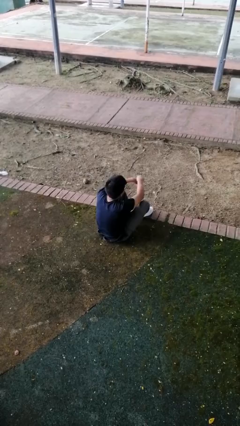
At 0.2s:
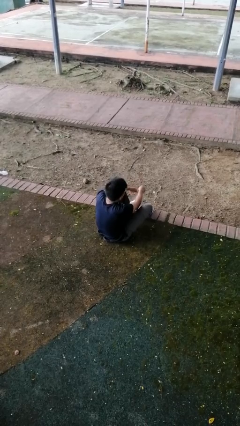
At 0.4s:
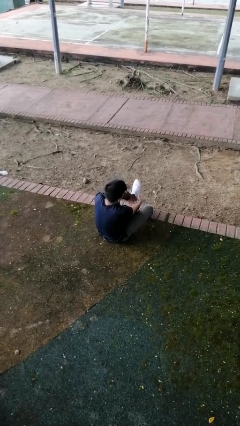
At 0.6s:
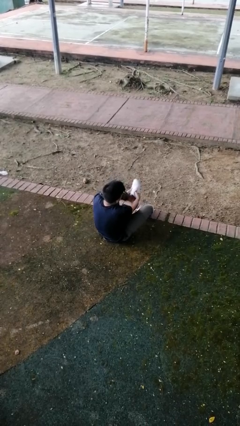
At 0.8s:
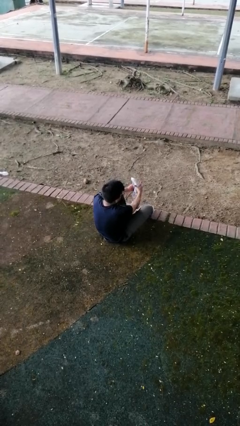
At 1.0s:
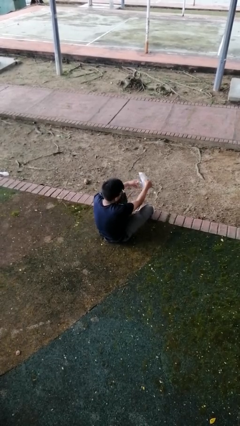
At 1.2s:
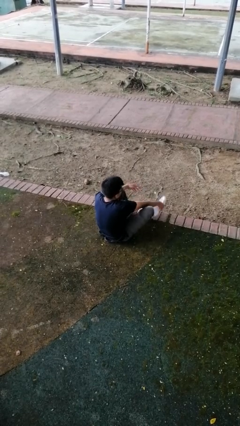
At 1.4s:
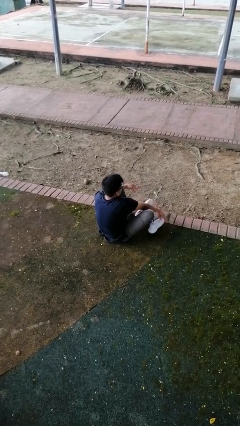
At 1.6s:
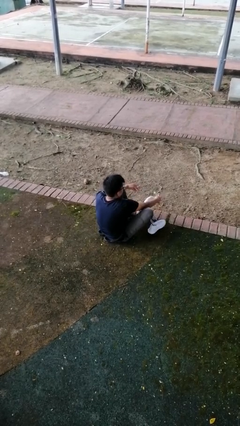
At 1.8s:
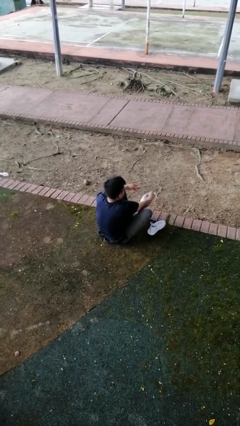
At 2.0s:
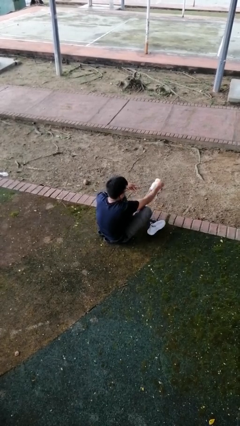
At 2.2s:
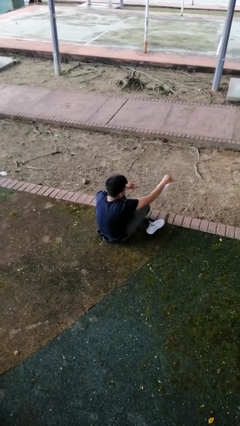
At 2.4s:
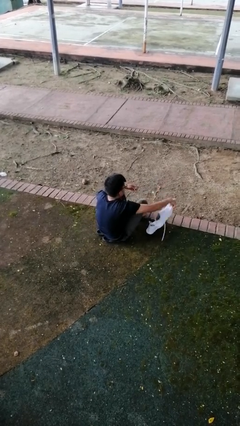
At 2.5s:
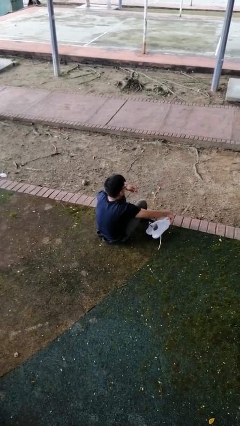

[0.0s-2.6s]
person takes off shoes

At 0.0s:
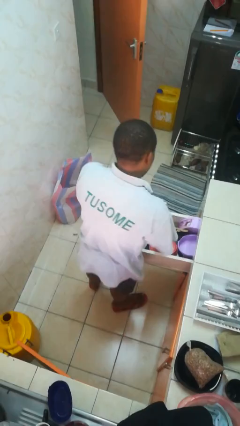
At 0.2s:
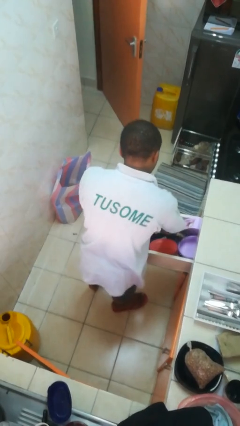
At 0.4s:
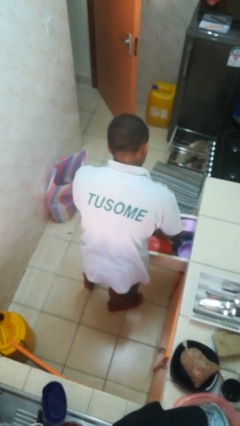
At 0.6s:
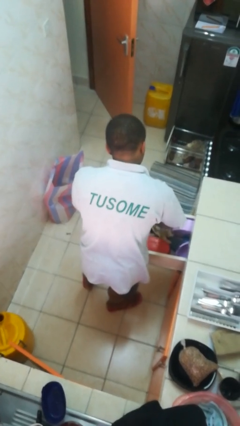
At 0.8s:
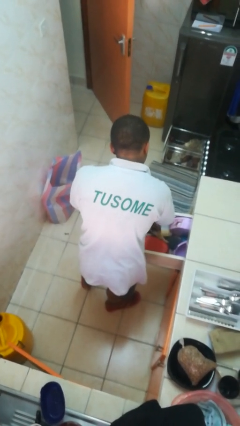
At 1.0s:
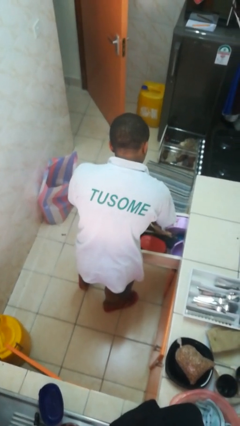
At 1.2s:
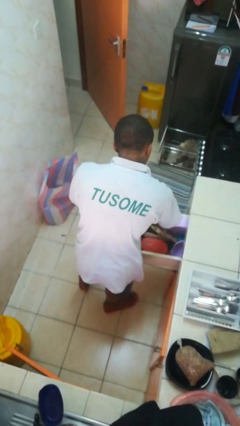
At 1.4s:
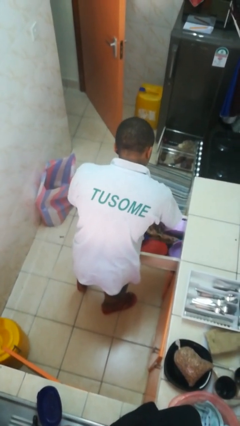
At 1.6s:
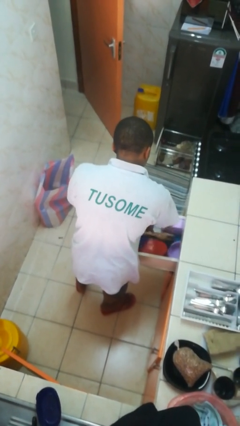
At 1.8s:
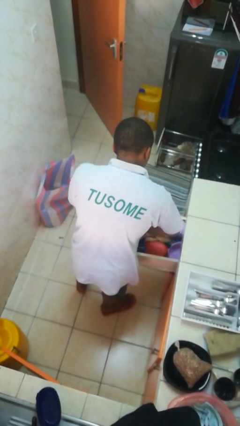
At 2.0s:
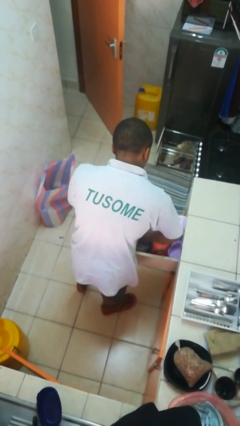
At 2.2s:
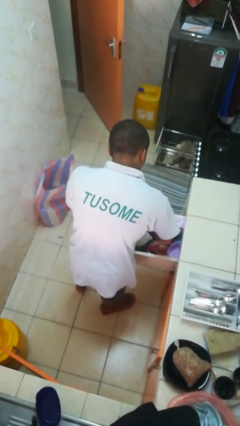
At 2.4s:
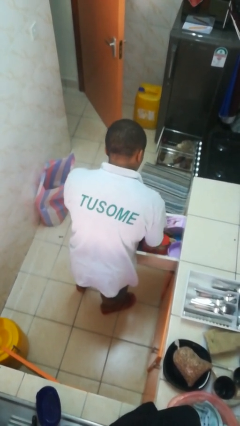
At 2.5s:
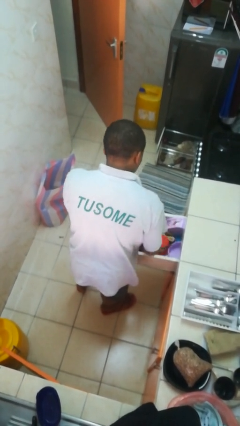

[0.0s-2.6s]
person searches in kitchen drawer

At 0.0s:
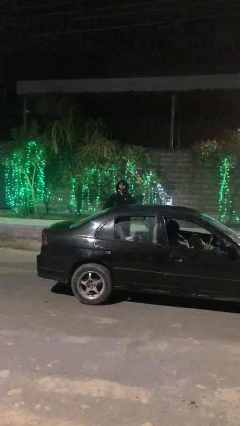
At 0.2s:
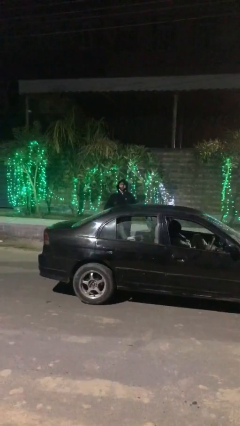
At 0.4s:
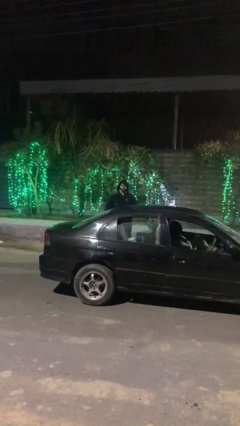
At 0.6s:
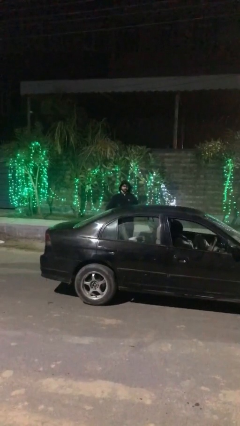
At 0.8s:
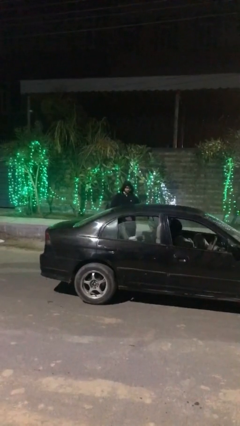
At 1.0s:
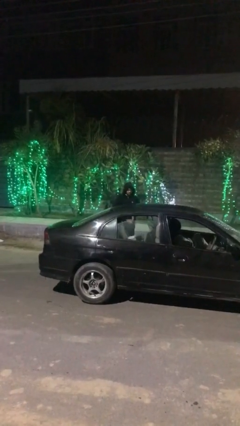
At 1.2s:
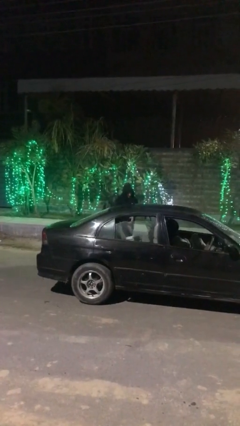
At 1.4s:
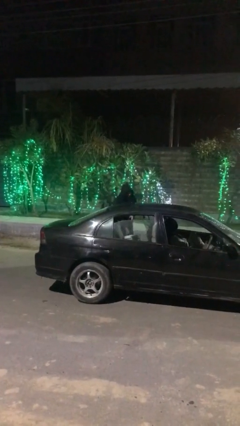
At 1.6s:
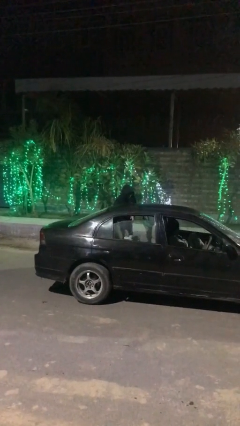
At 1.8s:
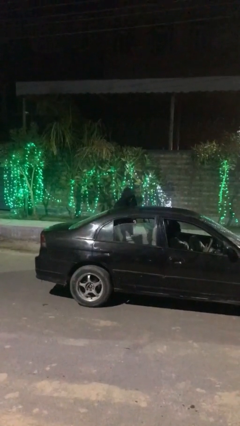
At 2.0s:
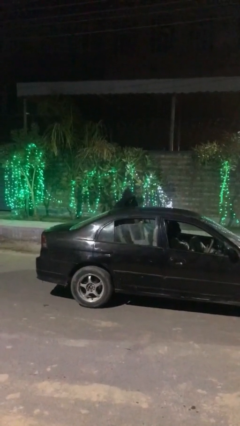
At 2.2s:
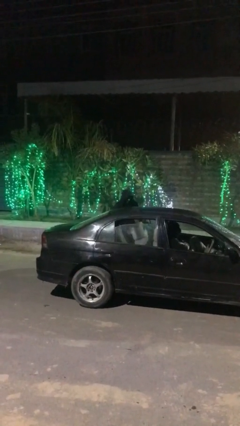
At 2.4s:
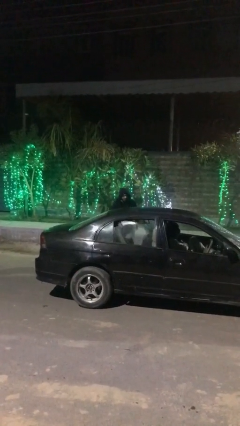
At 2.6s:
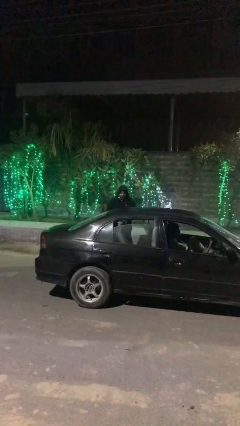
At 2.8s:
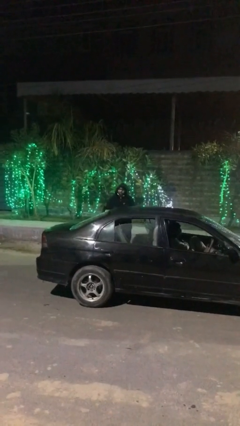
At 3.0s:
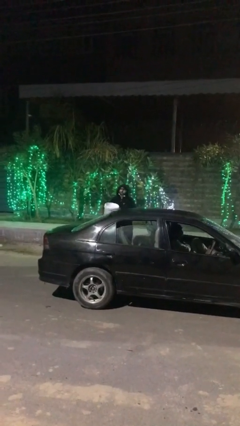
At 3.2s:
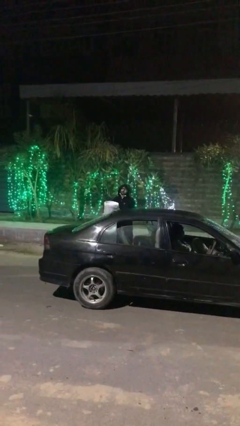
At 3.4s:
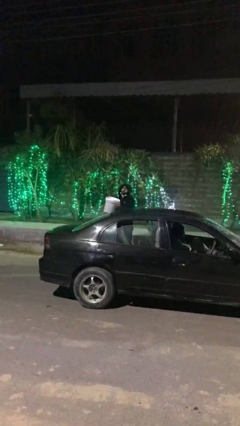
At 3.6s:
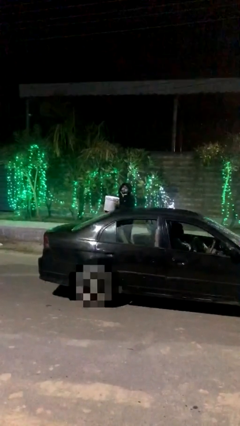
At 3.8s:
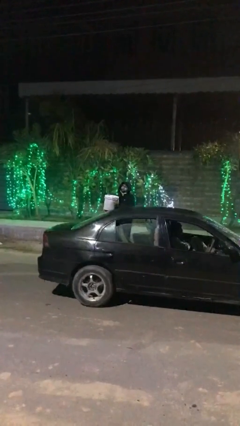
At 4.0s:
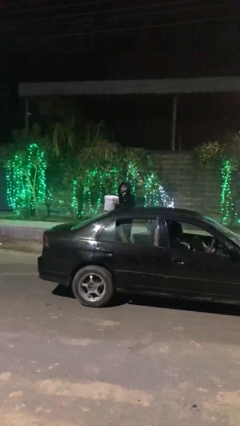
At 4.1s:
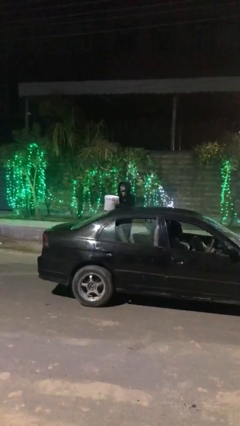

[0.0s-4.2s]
person unloads car

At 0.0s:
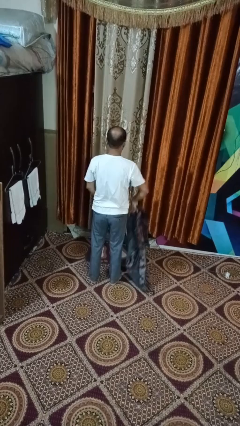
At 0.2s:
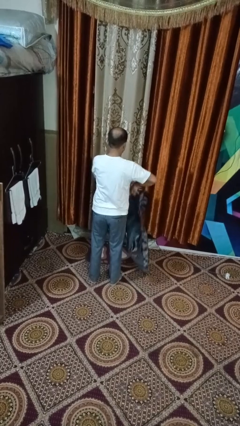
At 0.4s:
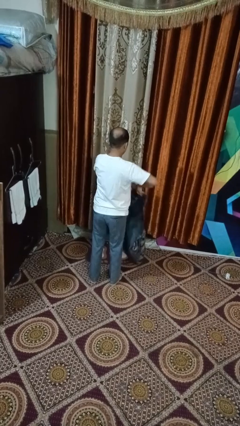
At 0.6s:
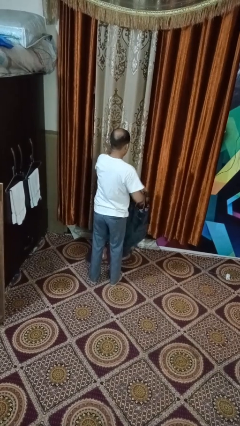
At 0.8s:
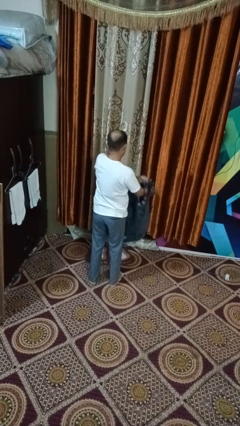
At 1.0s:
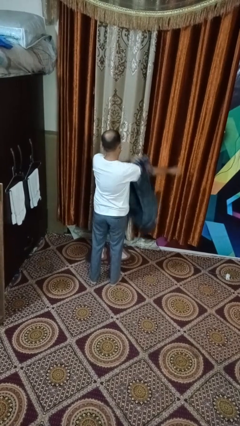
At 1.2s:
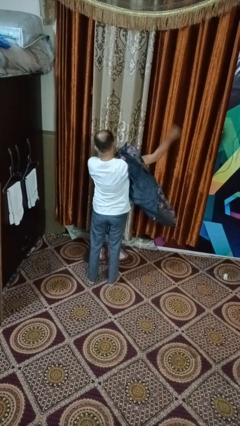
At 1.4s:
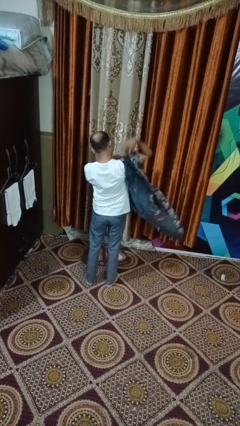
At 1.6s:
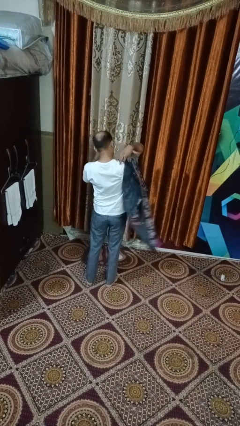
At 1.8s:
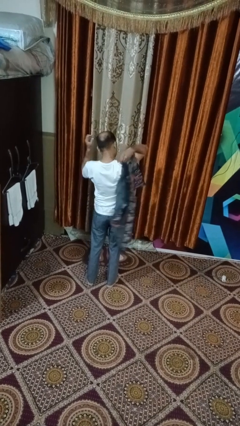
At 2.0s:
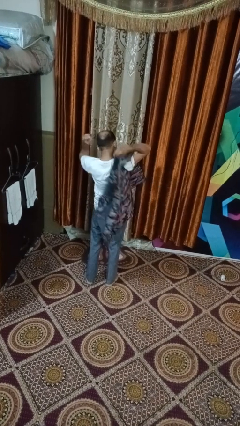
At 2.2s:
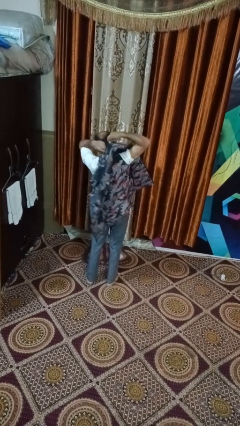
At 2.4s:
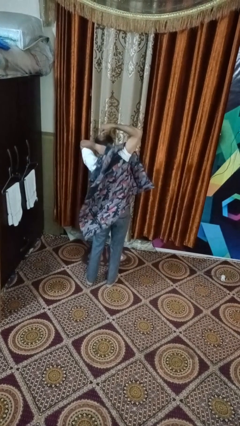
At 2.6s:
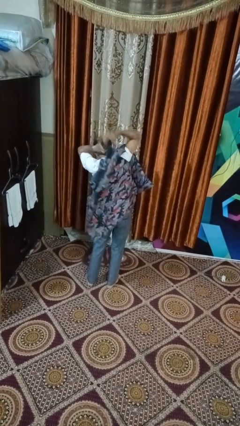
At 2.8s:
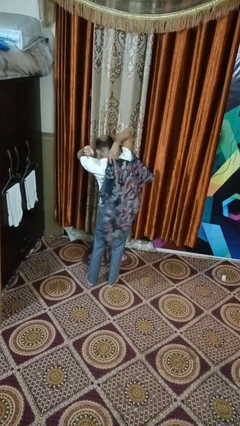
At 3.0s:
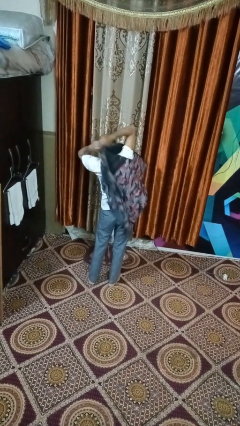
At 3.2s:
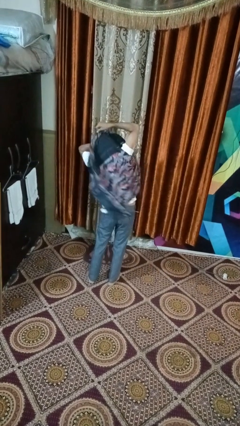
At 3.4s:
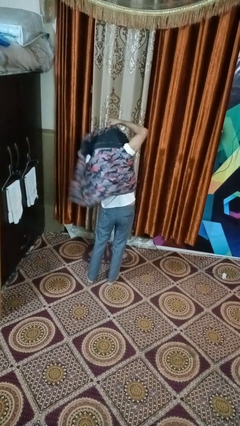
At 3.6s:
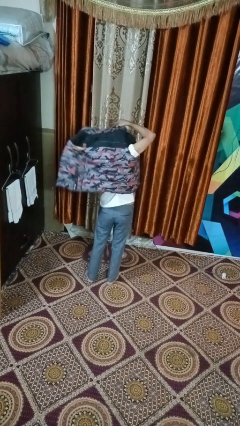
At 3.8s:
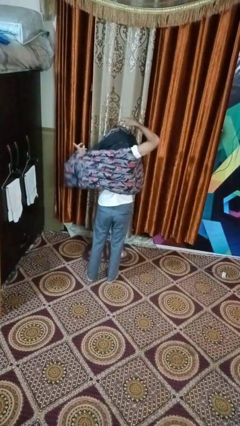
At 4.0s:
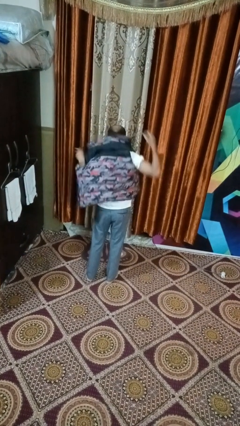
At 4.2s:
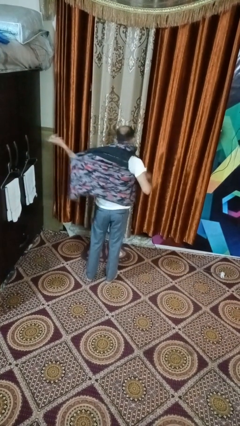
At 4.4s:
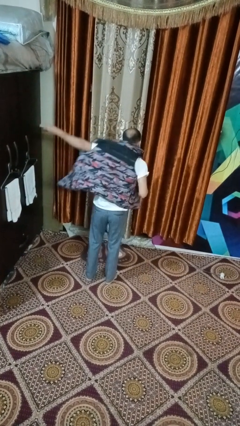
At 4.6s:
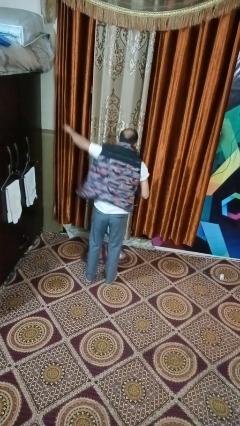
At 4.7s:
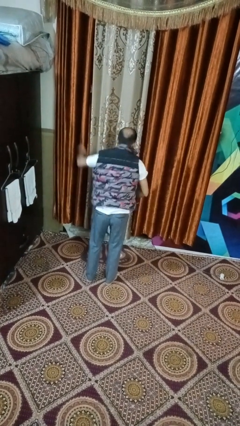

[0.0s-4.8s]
person puts on jacket

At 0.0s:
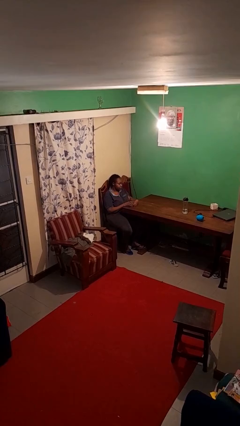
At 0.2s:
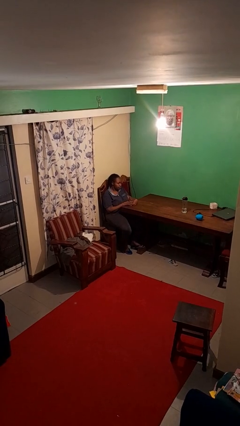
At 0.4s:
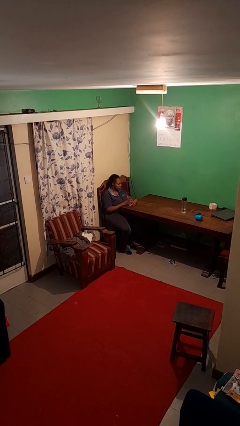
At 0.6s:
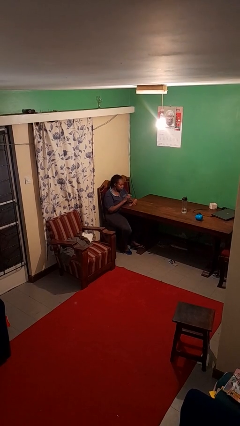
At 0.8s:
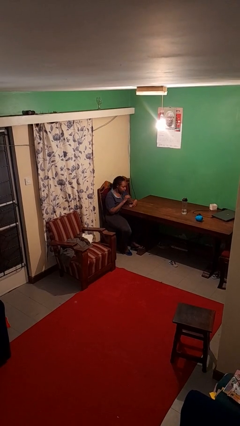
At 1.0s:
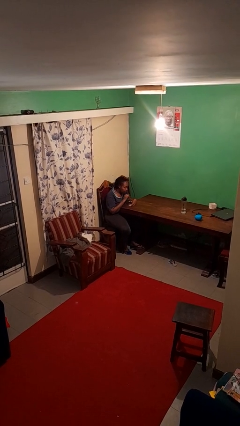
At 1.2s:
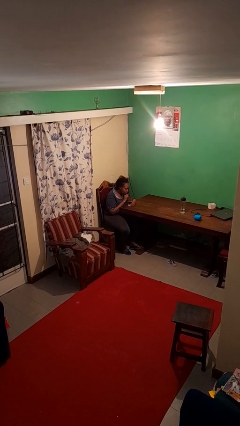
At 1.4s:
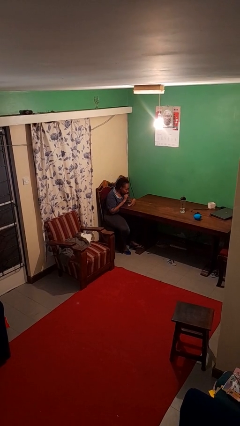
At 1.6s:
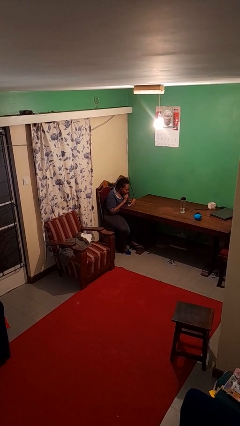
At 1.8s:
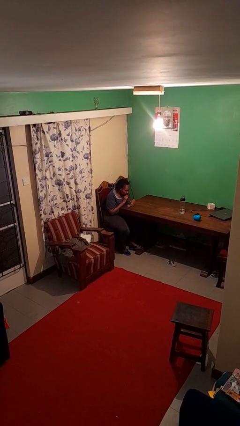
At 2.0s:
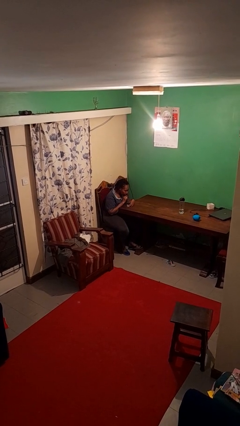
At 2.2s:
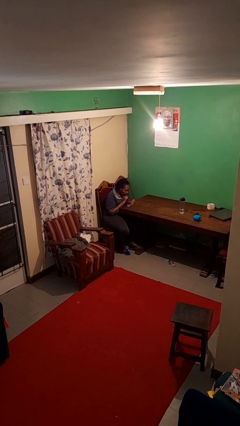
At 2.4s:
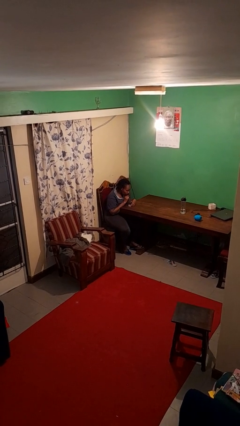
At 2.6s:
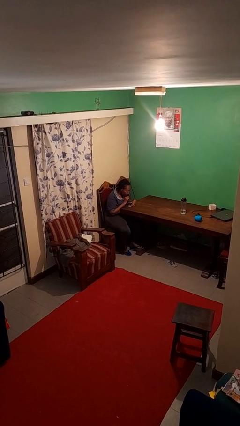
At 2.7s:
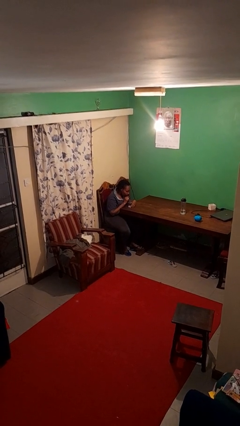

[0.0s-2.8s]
person drinks from straw

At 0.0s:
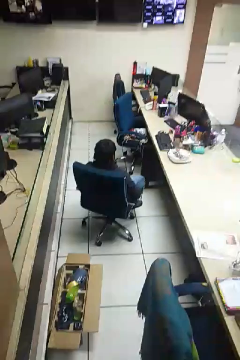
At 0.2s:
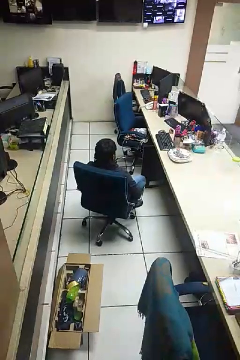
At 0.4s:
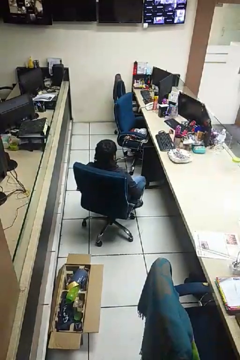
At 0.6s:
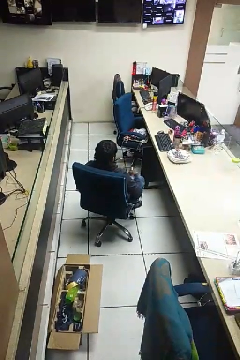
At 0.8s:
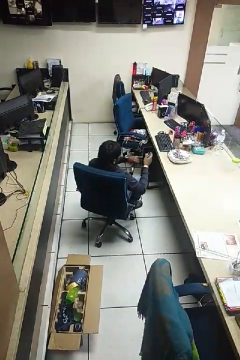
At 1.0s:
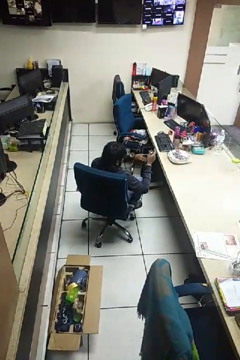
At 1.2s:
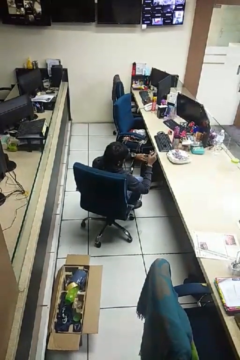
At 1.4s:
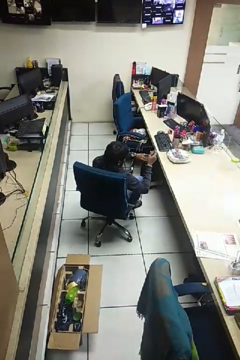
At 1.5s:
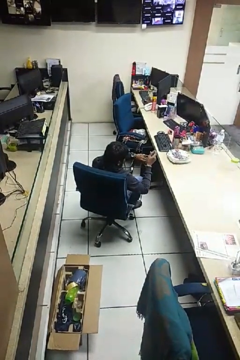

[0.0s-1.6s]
person clips fingernails
